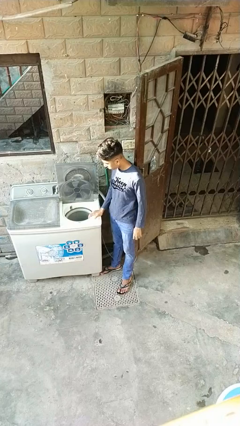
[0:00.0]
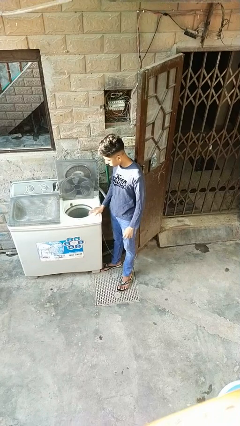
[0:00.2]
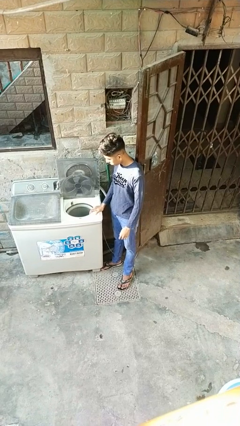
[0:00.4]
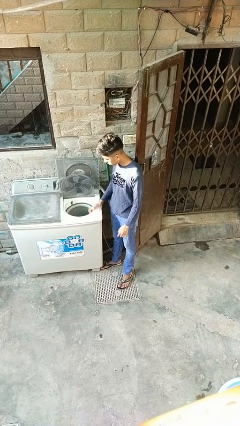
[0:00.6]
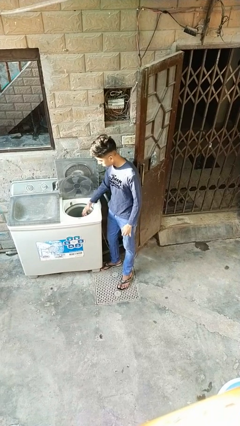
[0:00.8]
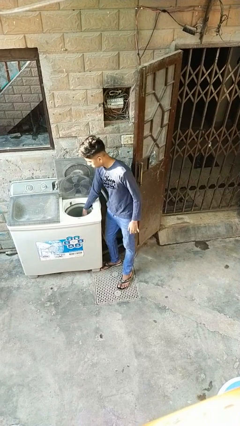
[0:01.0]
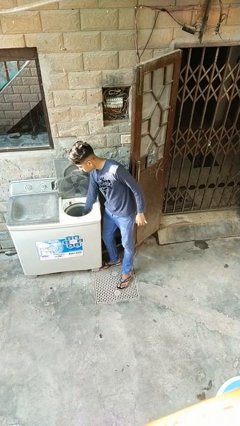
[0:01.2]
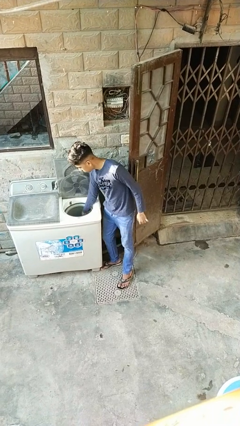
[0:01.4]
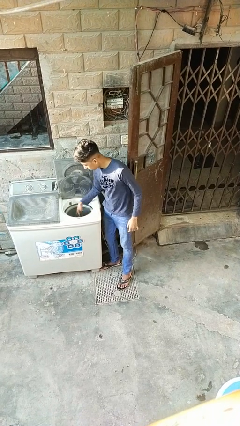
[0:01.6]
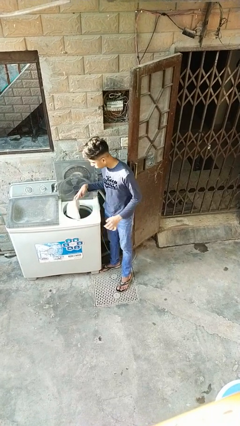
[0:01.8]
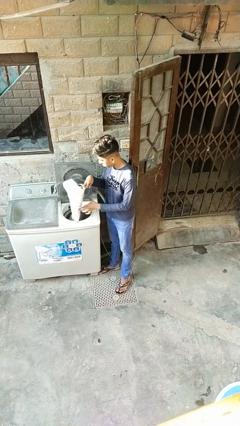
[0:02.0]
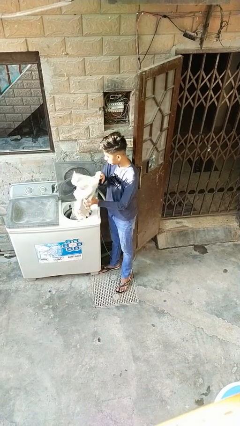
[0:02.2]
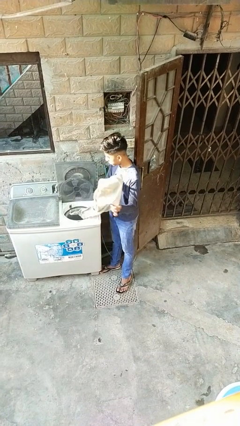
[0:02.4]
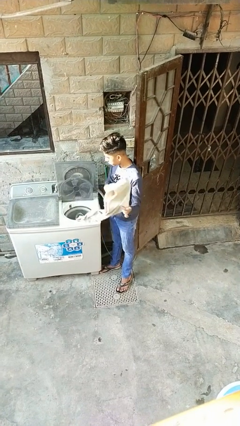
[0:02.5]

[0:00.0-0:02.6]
person unloads dryer

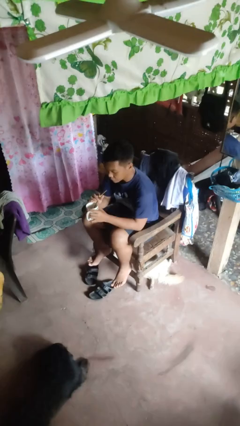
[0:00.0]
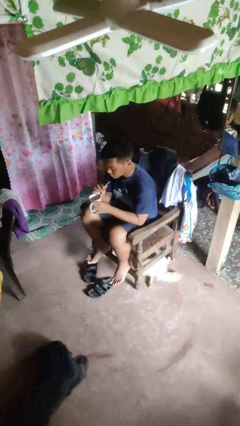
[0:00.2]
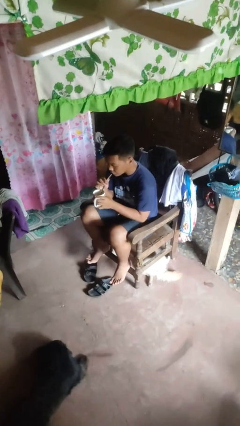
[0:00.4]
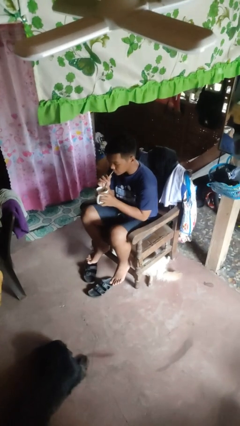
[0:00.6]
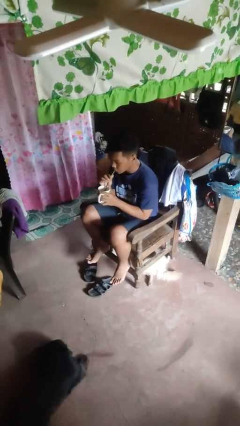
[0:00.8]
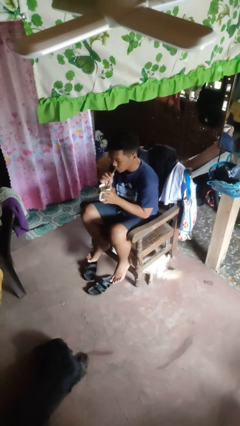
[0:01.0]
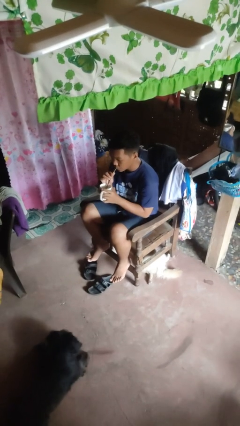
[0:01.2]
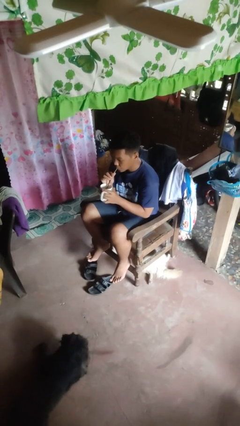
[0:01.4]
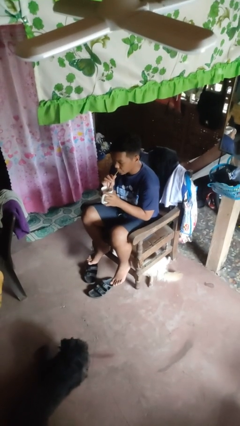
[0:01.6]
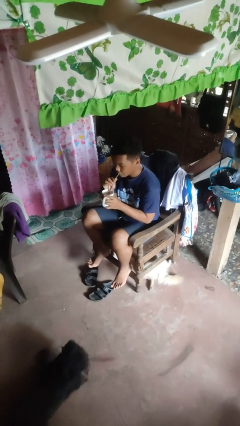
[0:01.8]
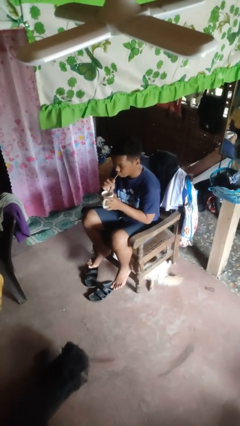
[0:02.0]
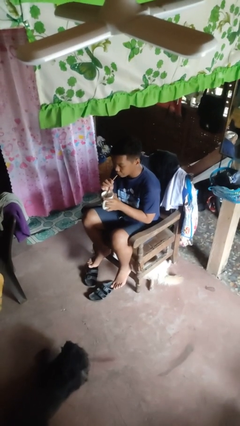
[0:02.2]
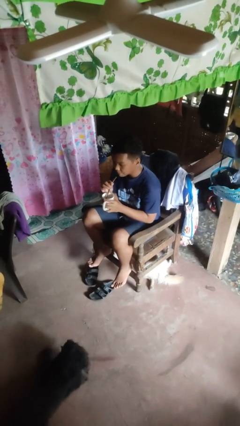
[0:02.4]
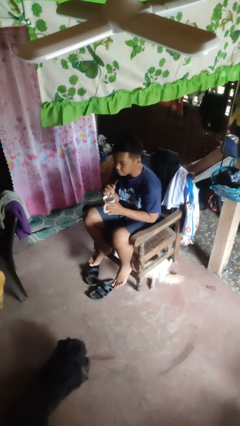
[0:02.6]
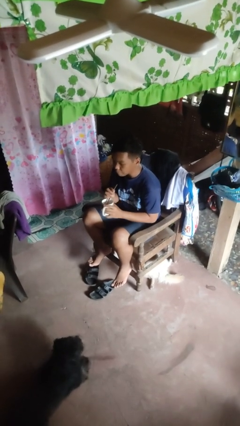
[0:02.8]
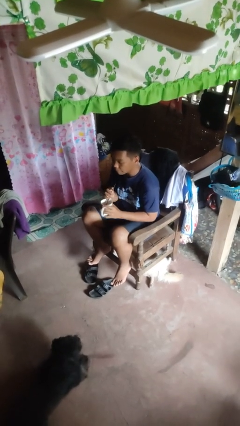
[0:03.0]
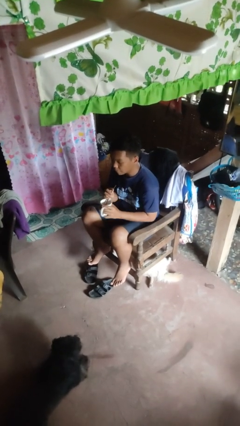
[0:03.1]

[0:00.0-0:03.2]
person drinks from straw

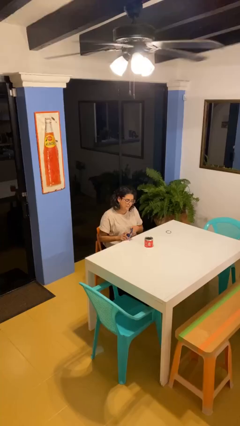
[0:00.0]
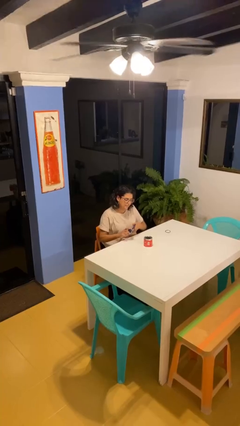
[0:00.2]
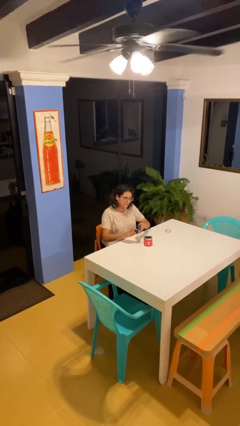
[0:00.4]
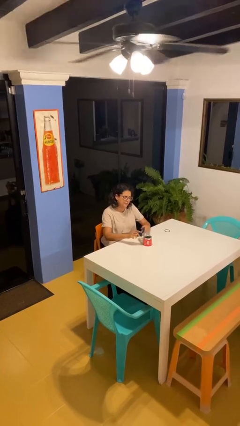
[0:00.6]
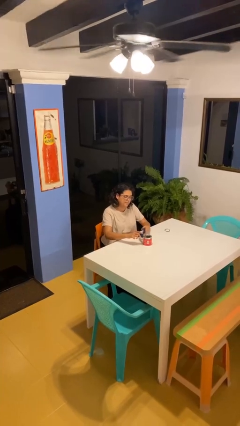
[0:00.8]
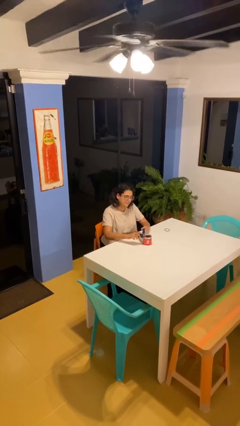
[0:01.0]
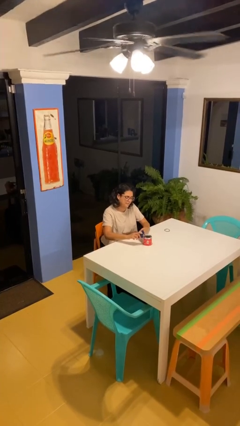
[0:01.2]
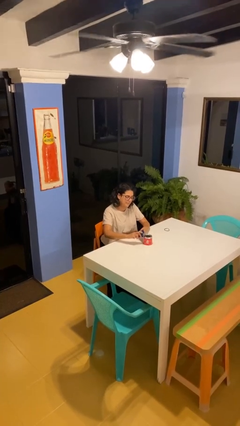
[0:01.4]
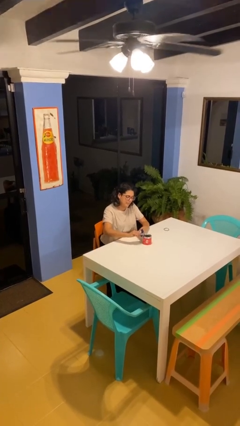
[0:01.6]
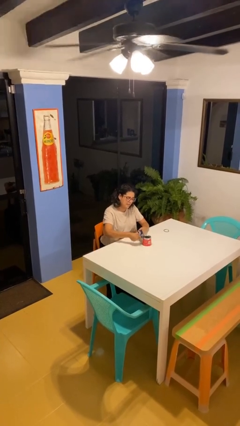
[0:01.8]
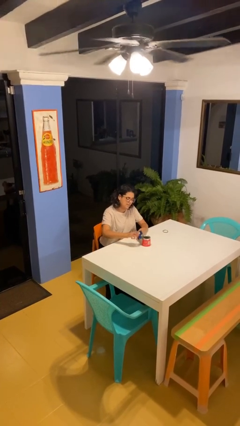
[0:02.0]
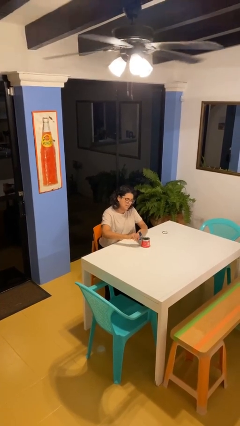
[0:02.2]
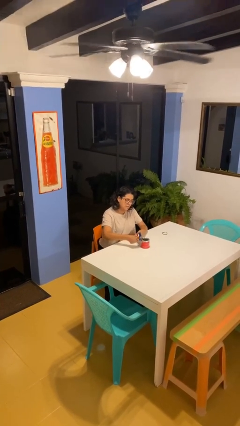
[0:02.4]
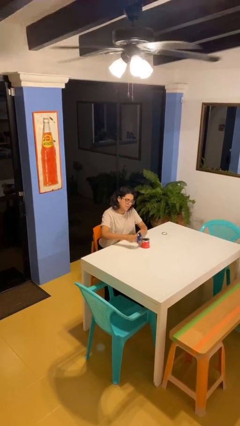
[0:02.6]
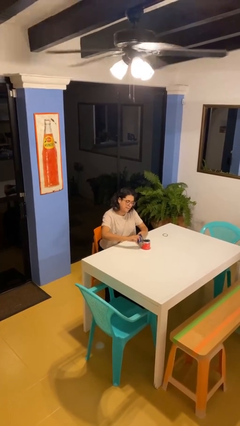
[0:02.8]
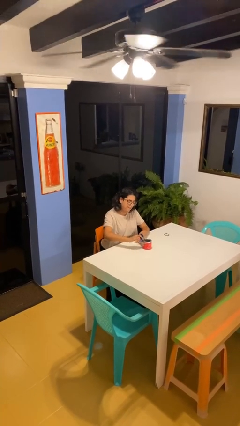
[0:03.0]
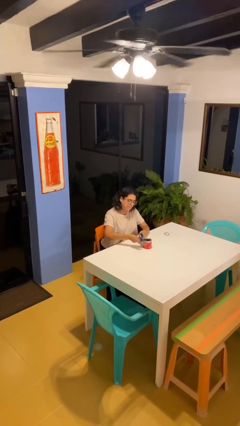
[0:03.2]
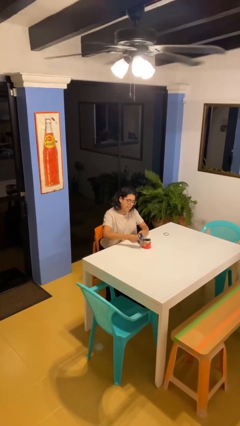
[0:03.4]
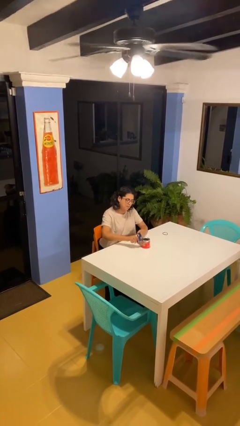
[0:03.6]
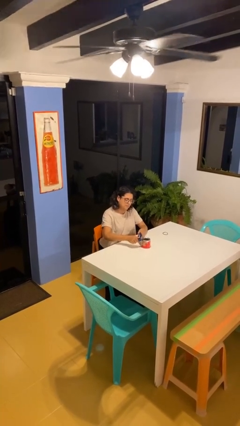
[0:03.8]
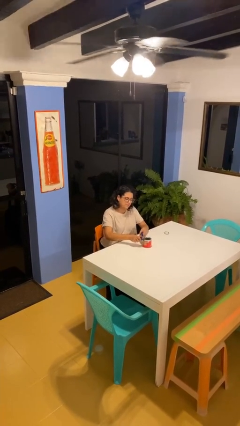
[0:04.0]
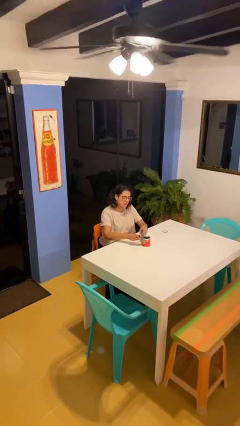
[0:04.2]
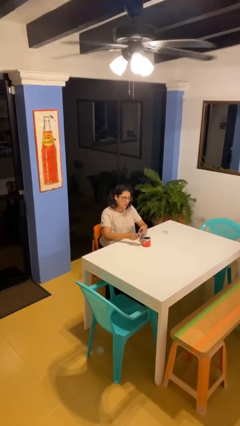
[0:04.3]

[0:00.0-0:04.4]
person opens can with can opener

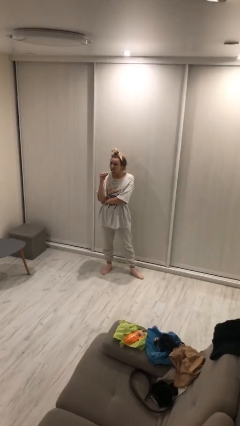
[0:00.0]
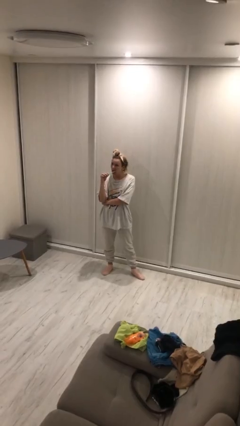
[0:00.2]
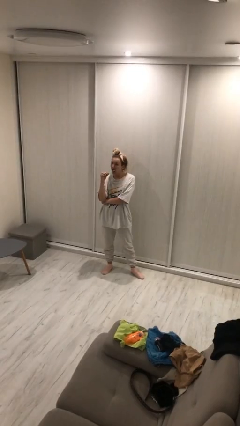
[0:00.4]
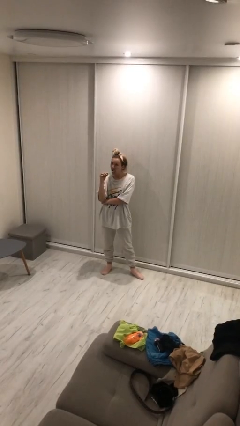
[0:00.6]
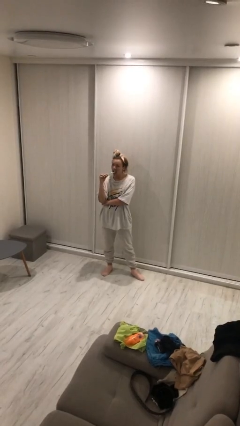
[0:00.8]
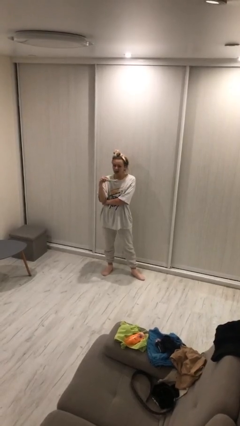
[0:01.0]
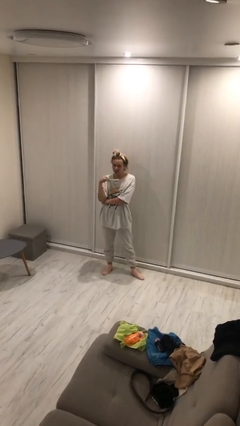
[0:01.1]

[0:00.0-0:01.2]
person brushes teeth

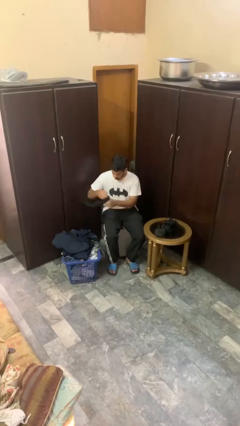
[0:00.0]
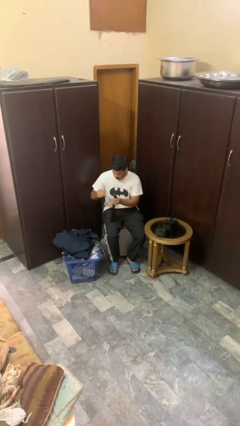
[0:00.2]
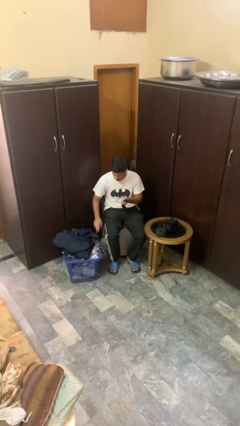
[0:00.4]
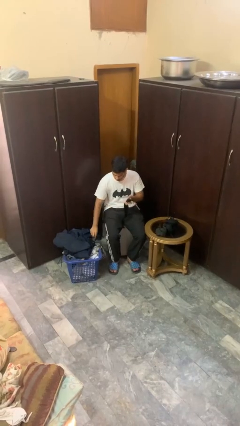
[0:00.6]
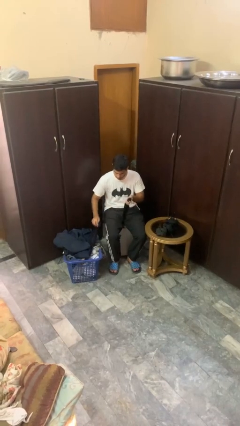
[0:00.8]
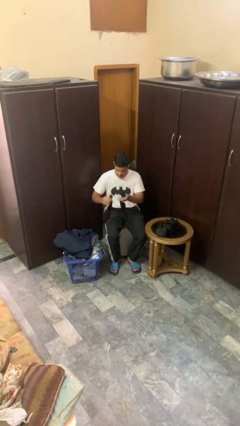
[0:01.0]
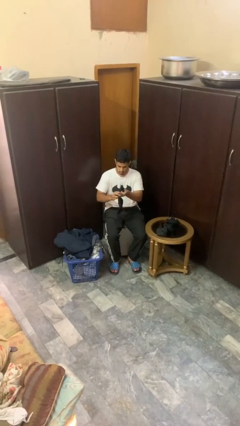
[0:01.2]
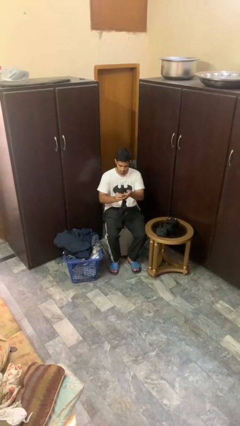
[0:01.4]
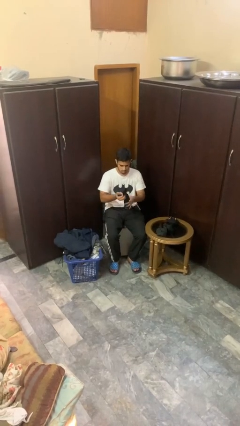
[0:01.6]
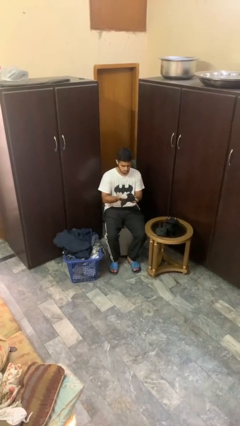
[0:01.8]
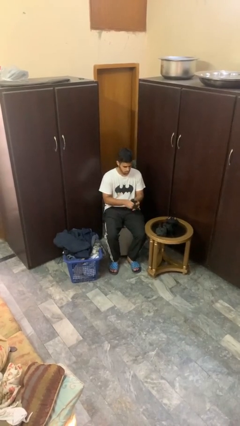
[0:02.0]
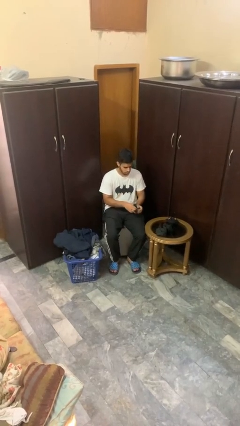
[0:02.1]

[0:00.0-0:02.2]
person folds socks

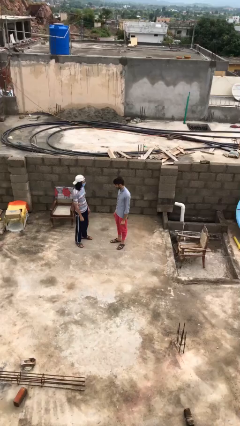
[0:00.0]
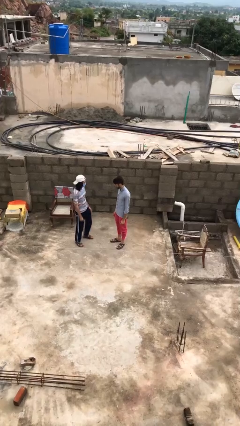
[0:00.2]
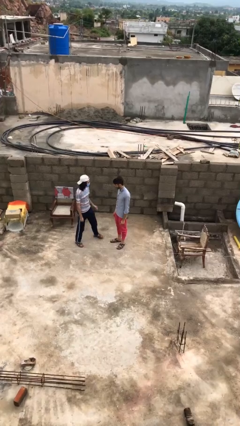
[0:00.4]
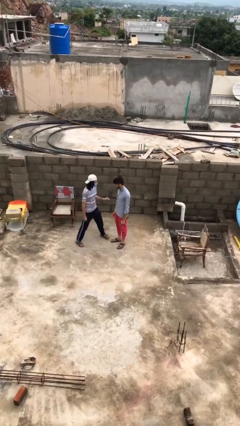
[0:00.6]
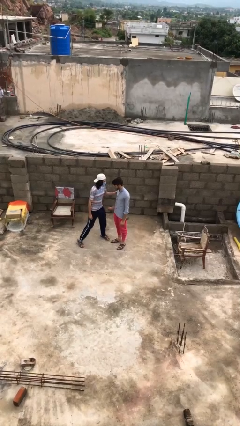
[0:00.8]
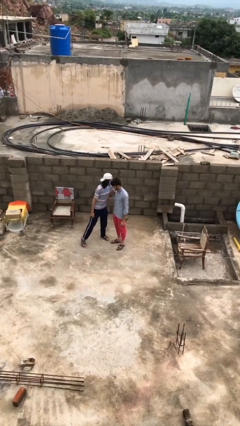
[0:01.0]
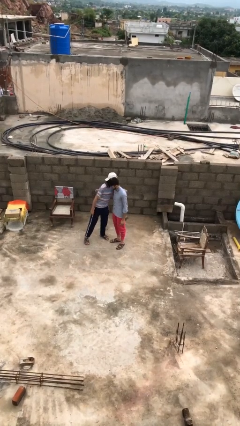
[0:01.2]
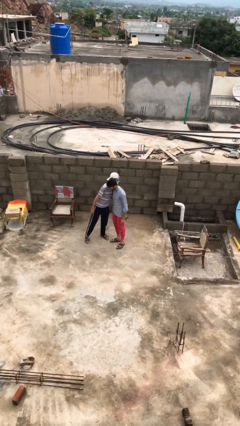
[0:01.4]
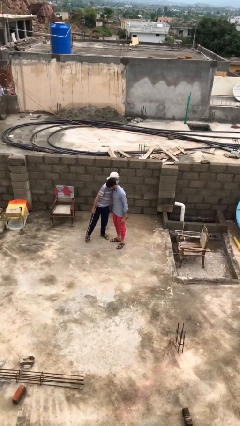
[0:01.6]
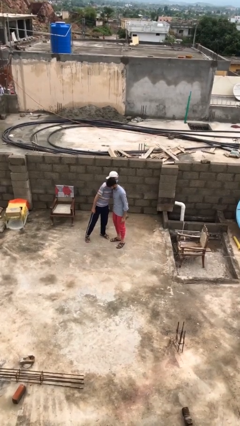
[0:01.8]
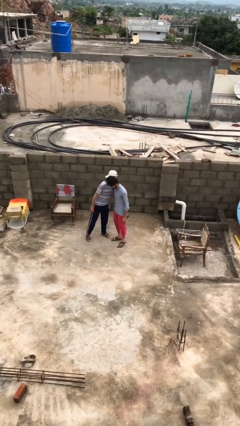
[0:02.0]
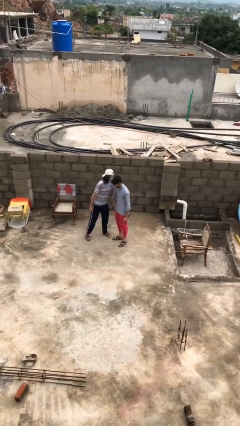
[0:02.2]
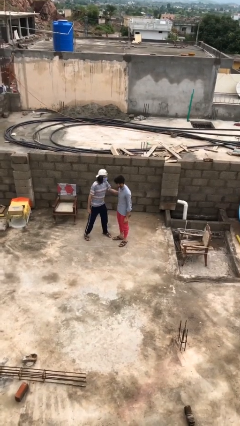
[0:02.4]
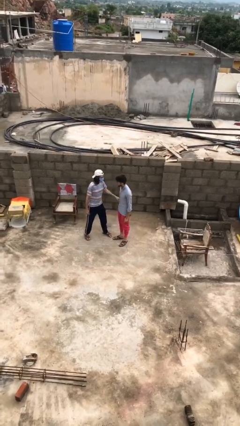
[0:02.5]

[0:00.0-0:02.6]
person embraces person

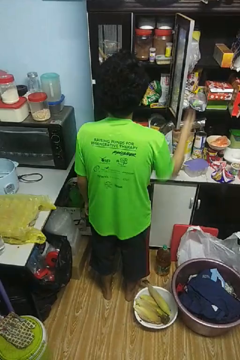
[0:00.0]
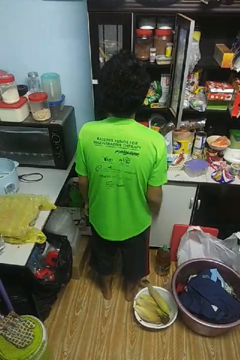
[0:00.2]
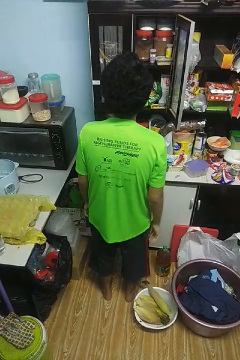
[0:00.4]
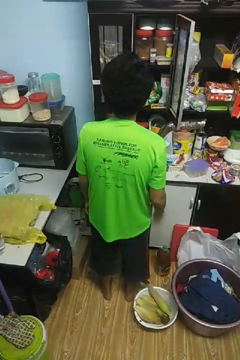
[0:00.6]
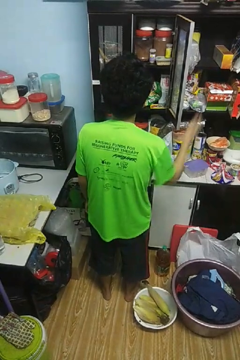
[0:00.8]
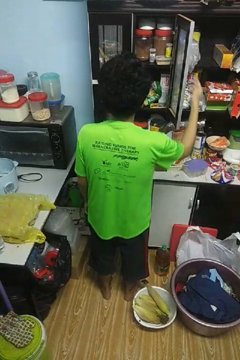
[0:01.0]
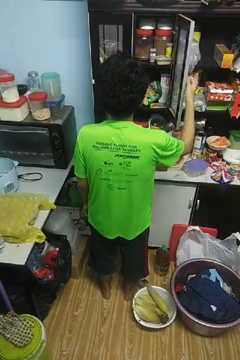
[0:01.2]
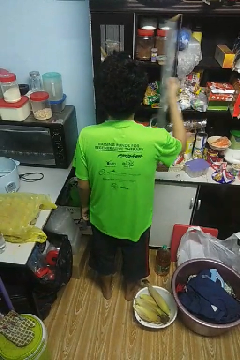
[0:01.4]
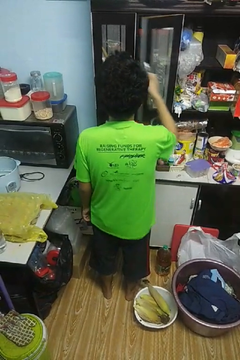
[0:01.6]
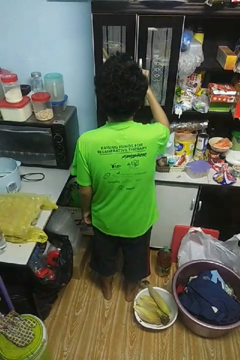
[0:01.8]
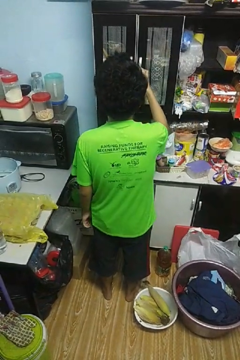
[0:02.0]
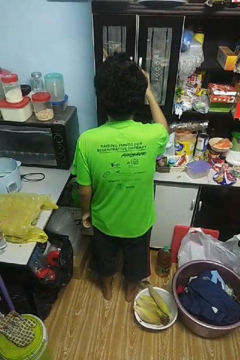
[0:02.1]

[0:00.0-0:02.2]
person closes cabinet
